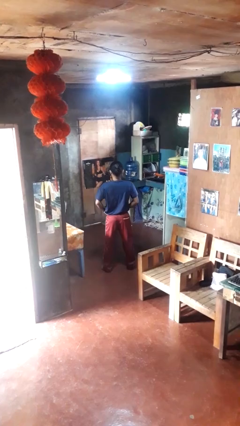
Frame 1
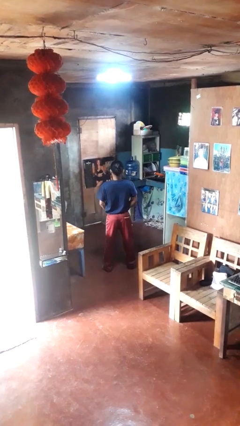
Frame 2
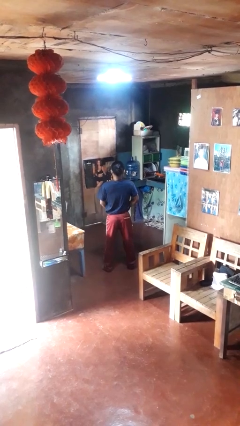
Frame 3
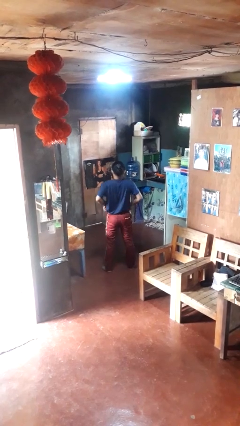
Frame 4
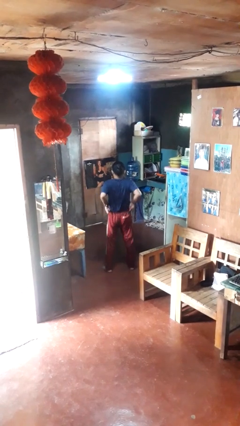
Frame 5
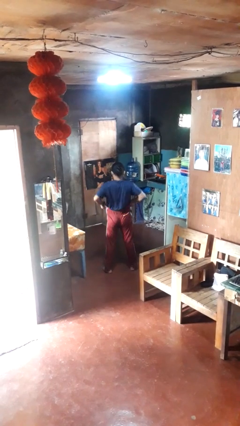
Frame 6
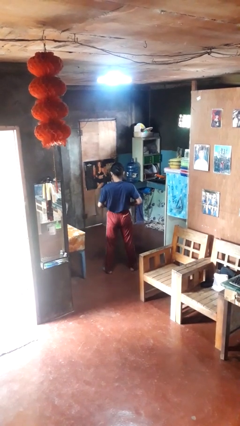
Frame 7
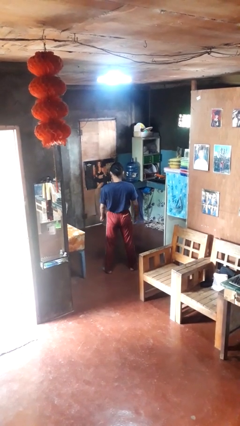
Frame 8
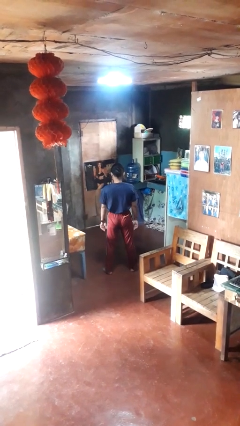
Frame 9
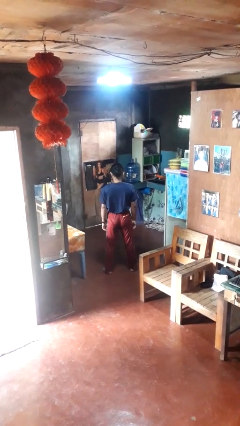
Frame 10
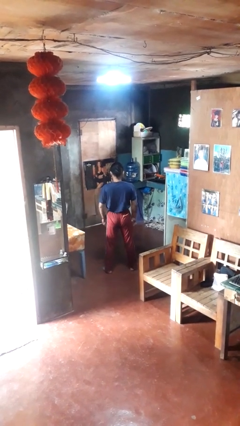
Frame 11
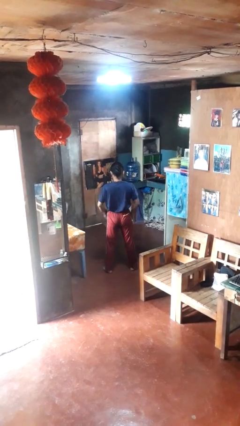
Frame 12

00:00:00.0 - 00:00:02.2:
person hikes up pants

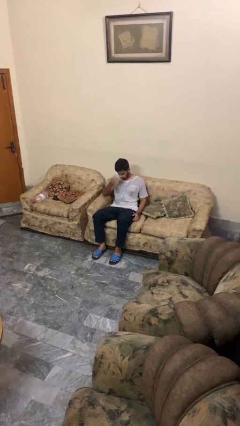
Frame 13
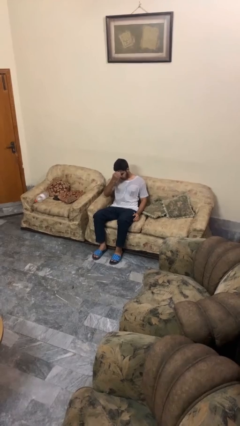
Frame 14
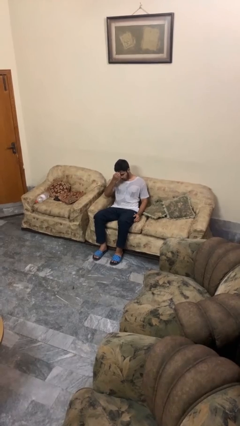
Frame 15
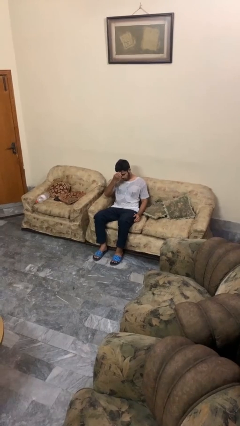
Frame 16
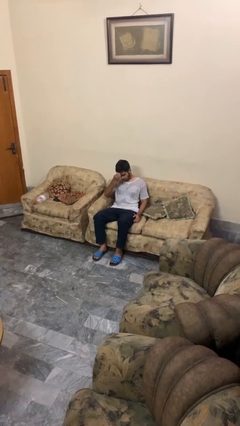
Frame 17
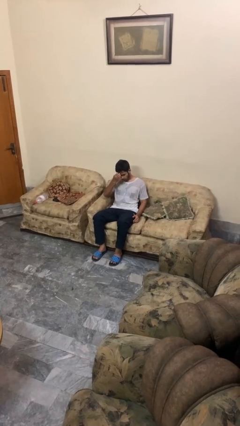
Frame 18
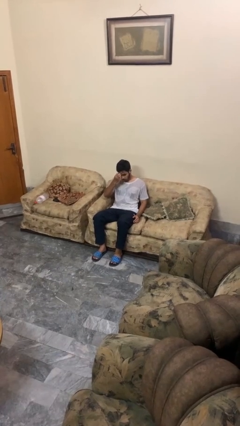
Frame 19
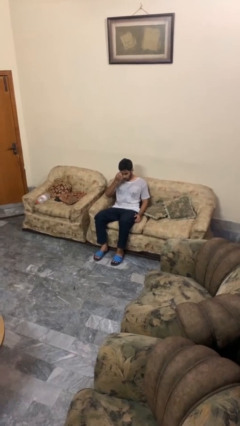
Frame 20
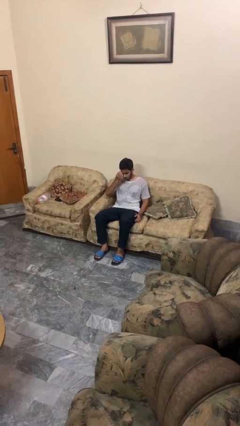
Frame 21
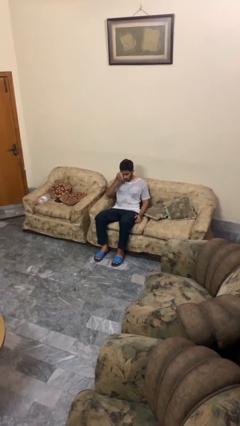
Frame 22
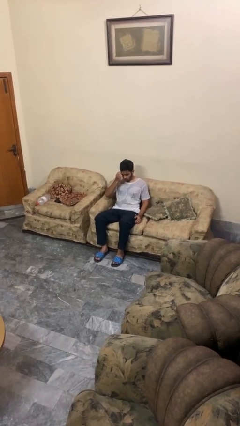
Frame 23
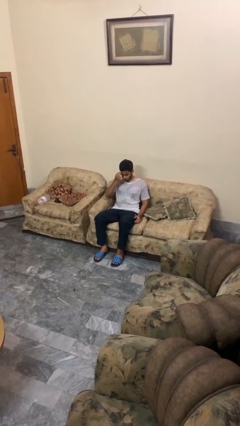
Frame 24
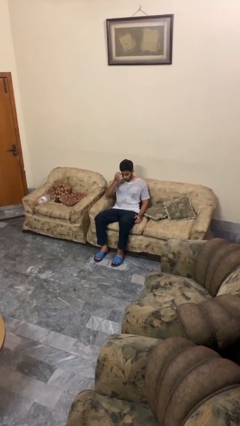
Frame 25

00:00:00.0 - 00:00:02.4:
person scratches face

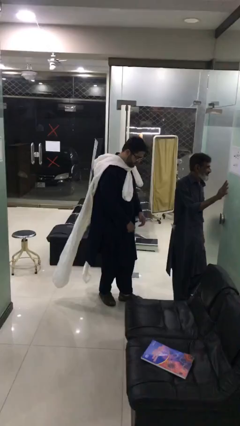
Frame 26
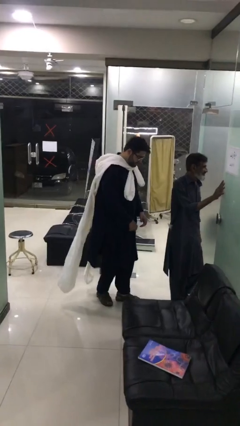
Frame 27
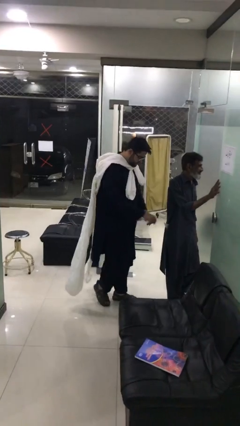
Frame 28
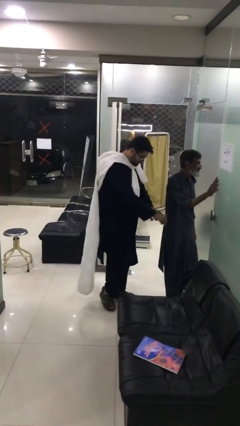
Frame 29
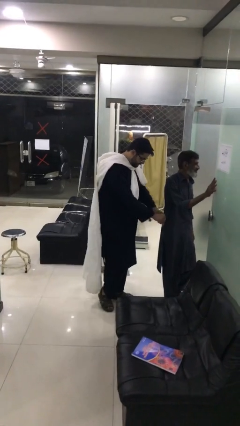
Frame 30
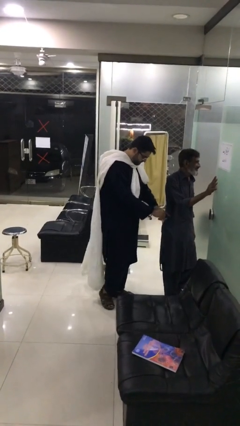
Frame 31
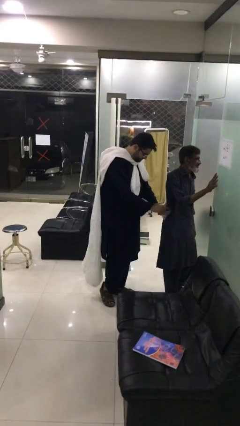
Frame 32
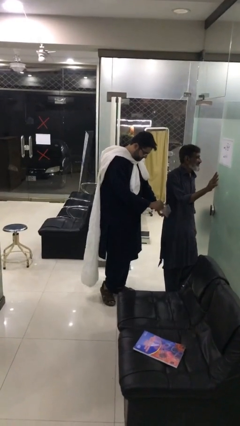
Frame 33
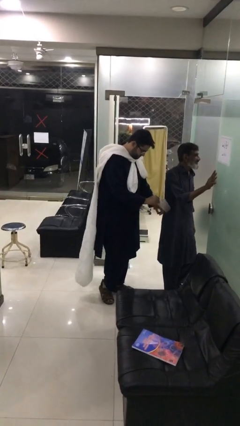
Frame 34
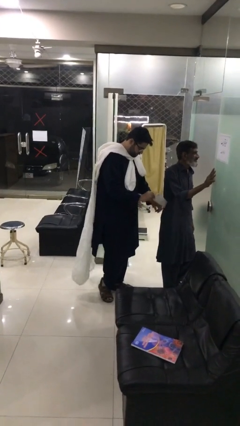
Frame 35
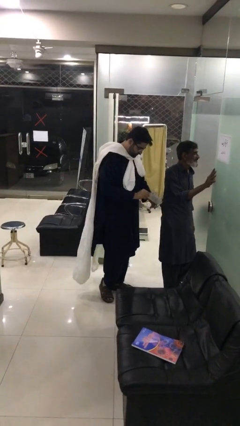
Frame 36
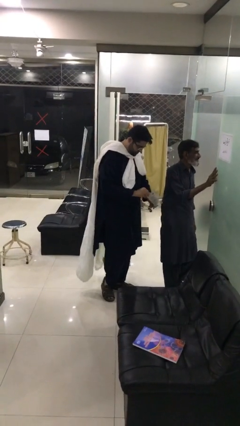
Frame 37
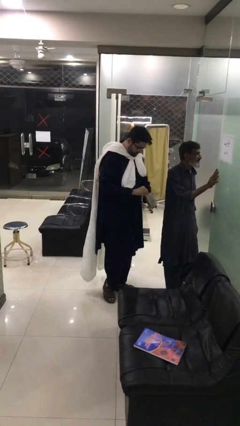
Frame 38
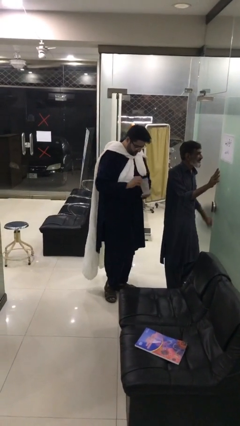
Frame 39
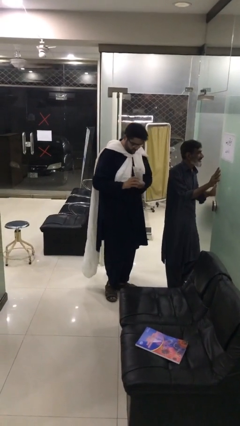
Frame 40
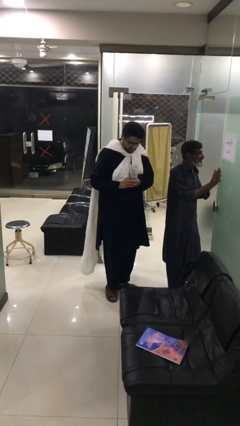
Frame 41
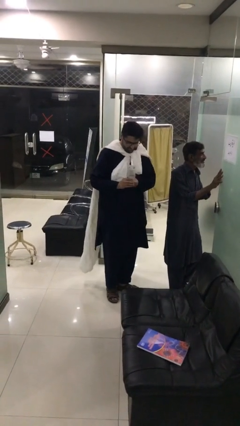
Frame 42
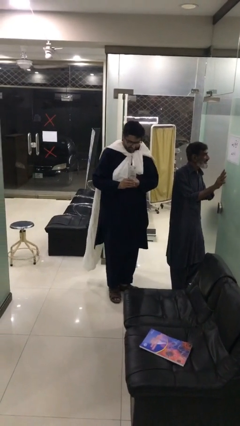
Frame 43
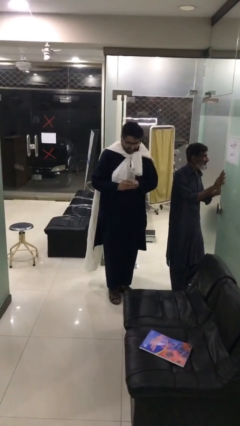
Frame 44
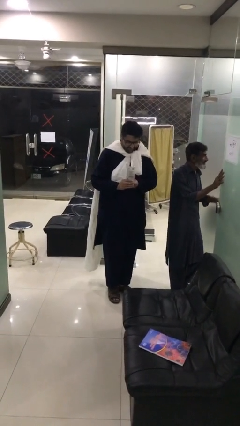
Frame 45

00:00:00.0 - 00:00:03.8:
person steals object from person

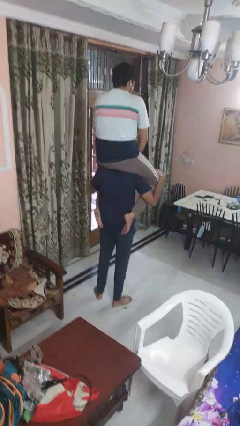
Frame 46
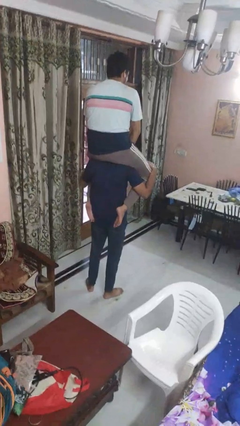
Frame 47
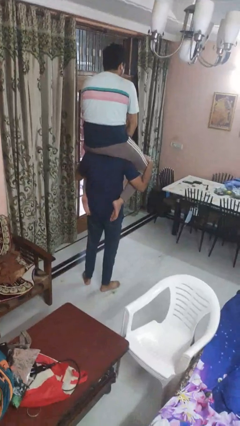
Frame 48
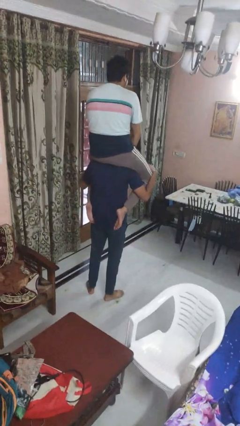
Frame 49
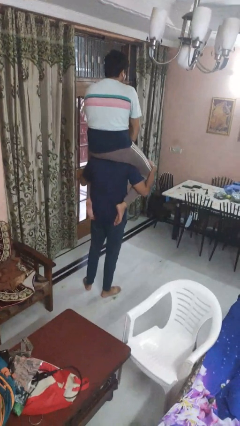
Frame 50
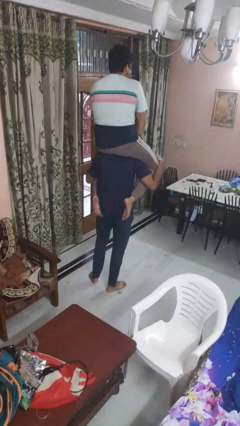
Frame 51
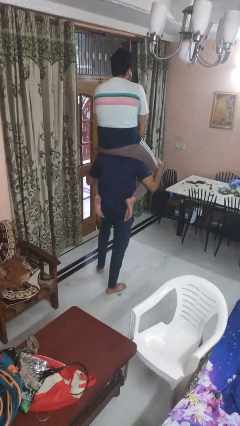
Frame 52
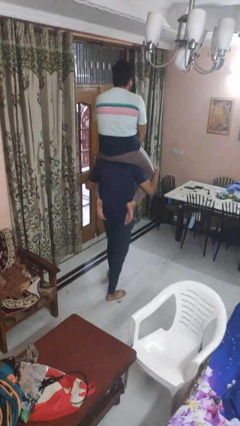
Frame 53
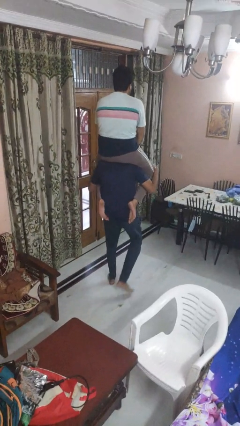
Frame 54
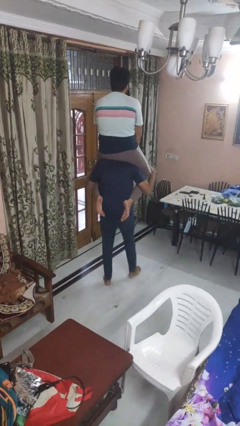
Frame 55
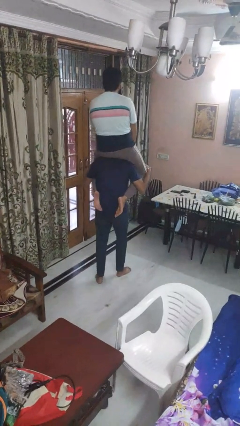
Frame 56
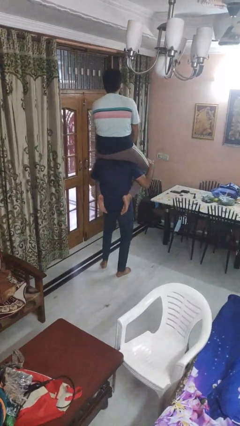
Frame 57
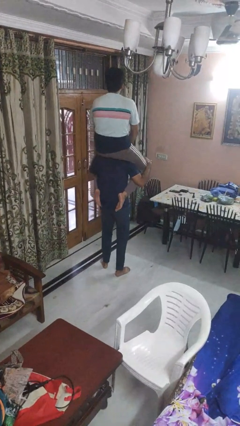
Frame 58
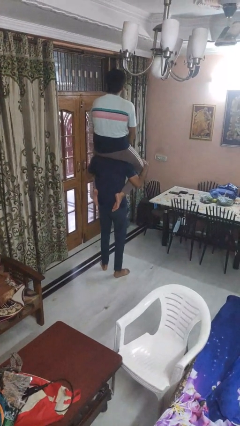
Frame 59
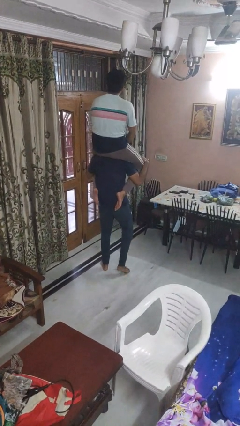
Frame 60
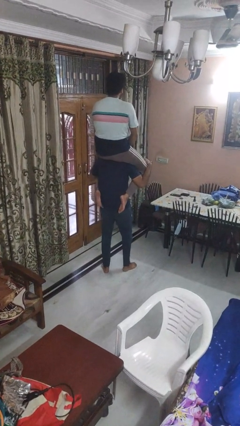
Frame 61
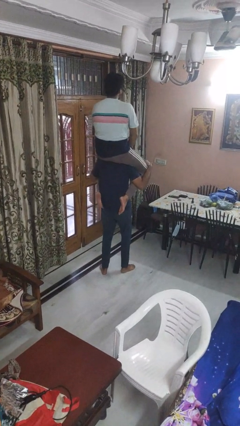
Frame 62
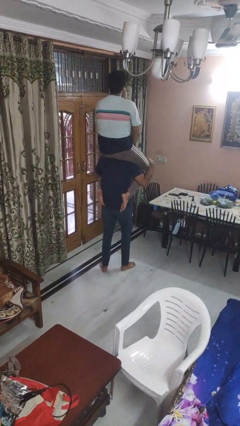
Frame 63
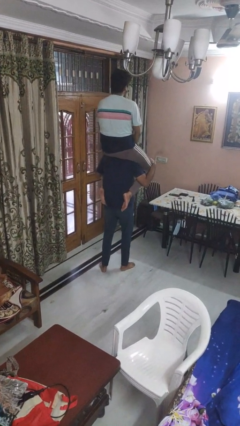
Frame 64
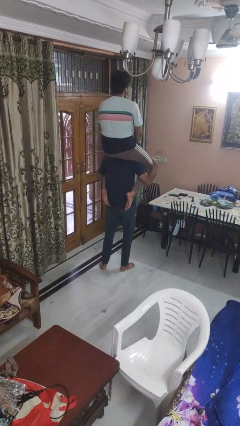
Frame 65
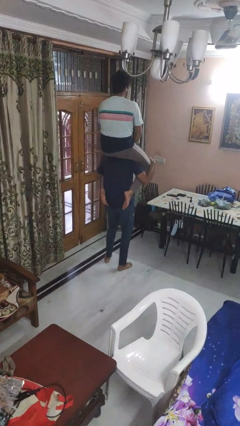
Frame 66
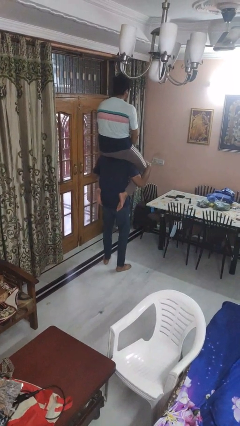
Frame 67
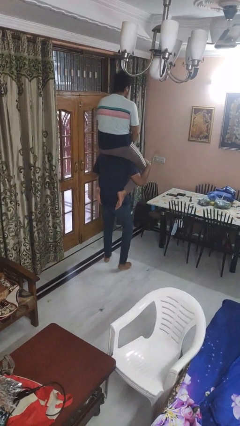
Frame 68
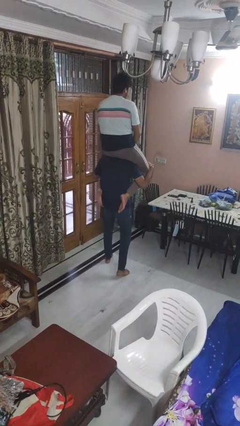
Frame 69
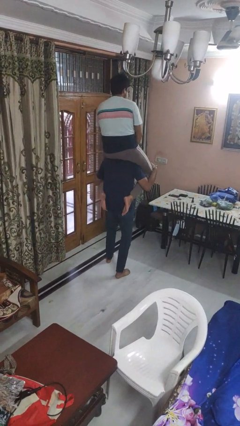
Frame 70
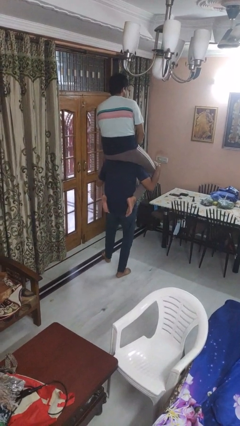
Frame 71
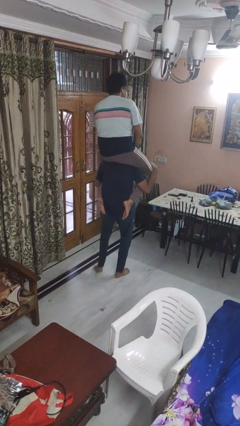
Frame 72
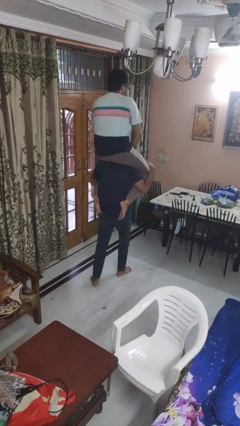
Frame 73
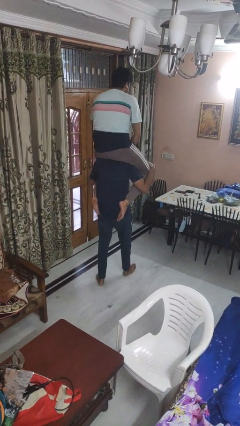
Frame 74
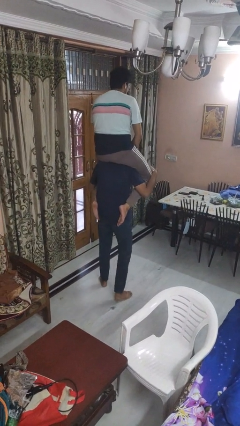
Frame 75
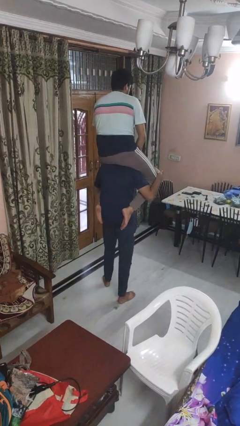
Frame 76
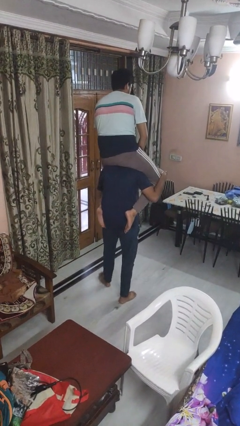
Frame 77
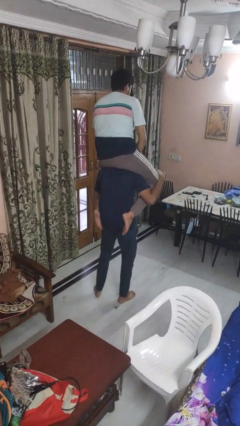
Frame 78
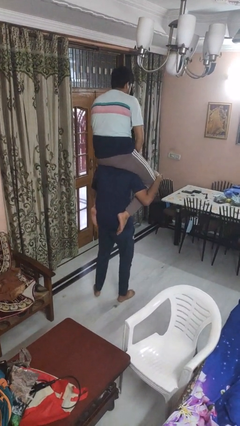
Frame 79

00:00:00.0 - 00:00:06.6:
person carries person on shoulders

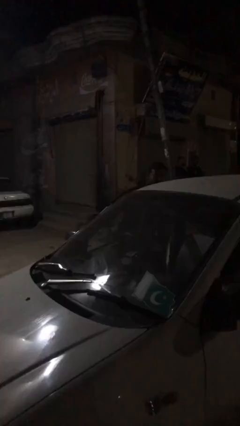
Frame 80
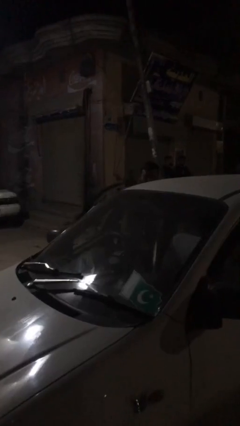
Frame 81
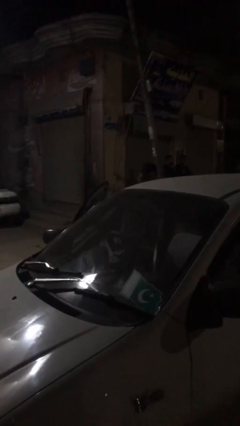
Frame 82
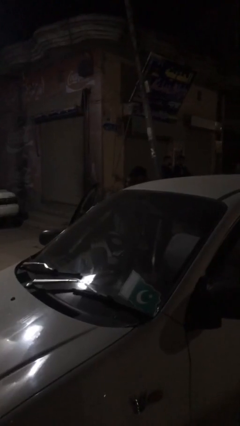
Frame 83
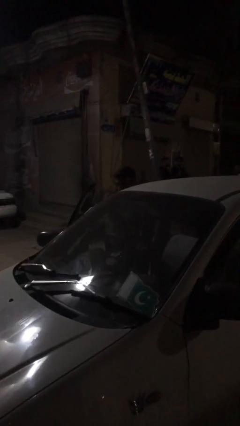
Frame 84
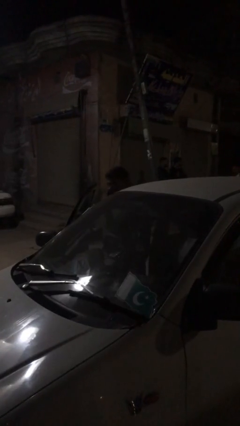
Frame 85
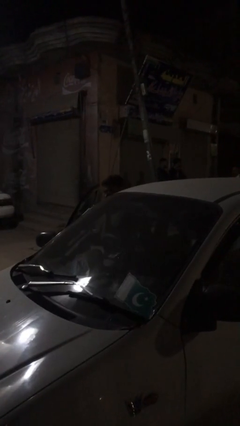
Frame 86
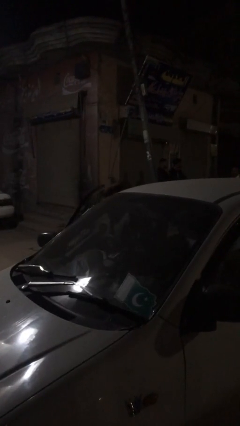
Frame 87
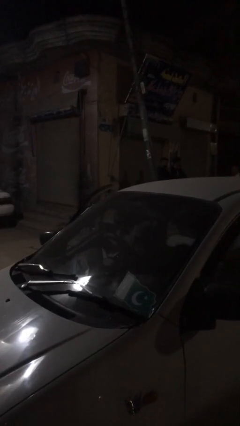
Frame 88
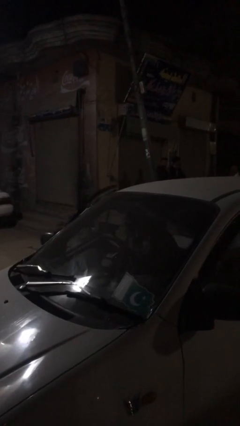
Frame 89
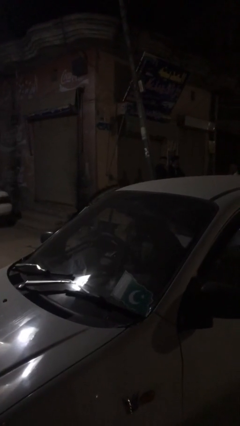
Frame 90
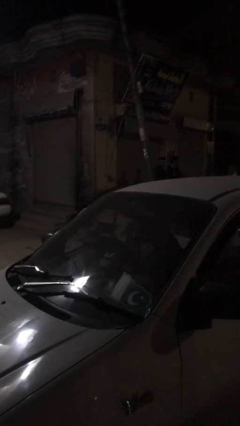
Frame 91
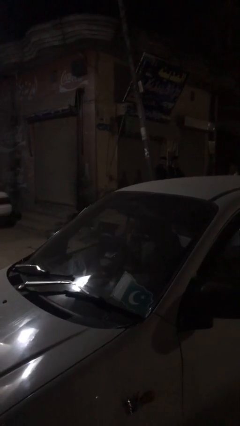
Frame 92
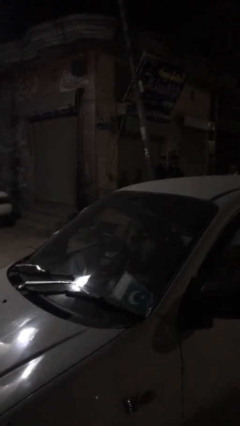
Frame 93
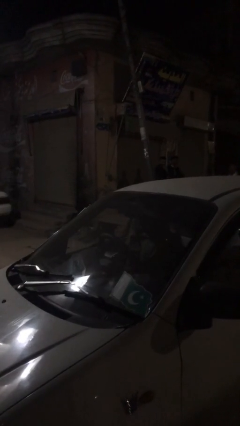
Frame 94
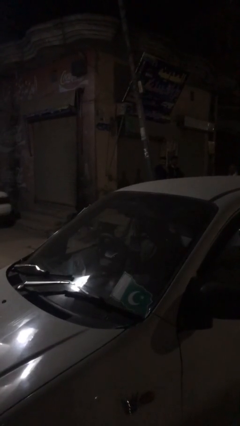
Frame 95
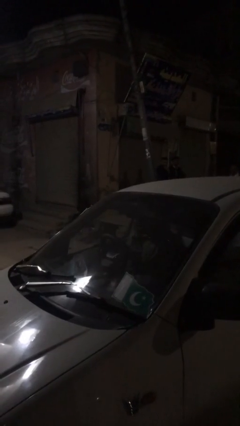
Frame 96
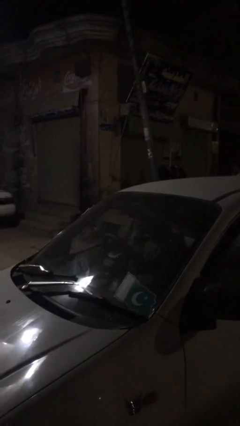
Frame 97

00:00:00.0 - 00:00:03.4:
person enters car
